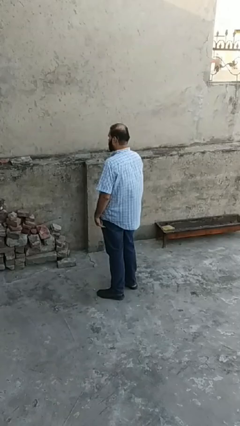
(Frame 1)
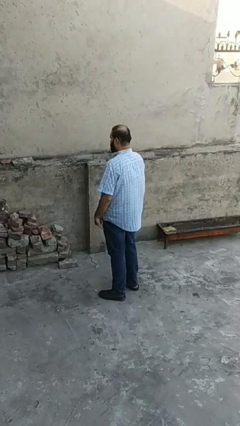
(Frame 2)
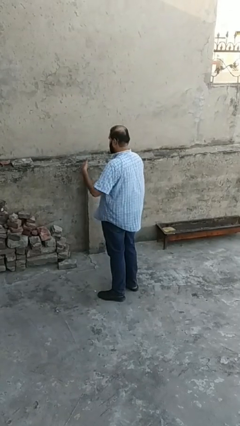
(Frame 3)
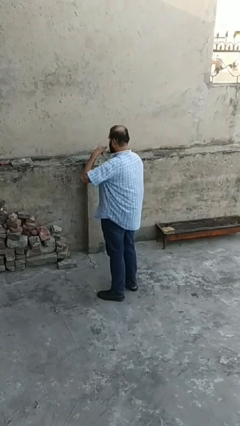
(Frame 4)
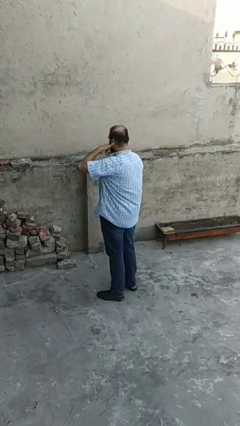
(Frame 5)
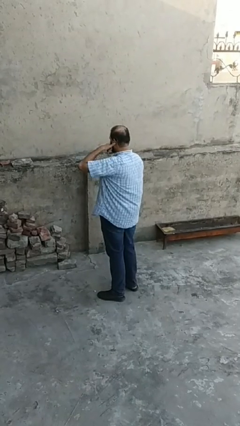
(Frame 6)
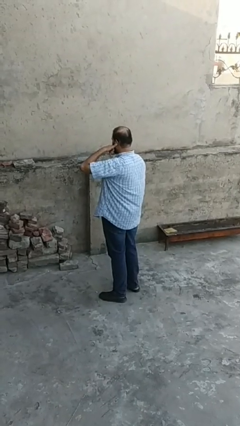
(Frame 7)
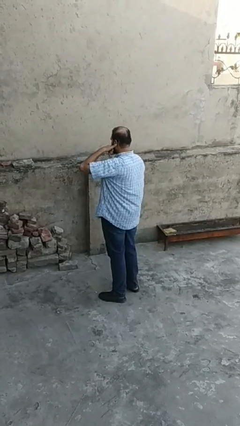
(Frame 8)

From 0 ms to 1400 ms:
person gestures call me

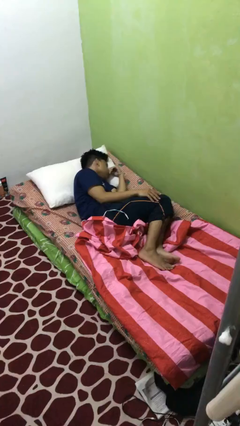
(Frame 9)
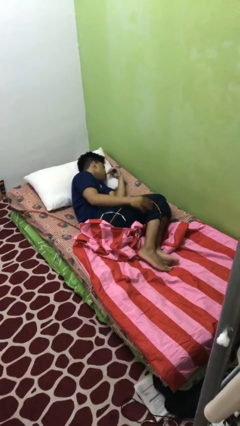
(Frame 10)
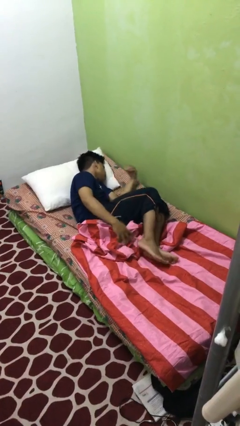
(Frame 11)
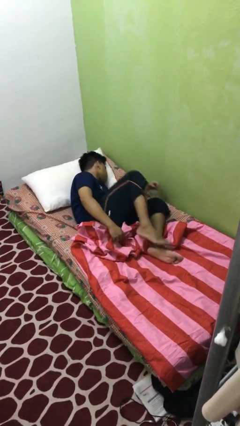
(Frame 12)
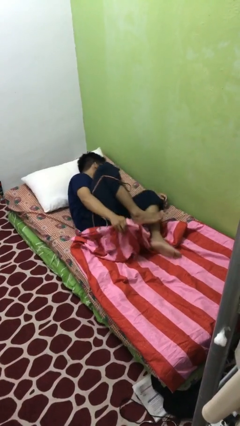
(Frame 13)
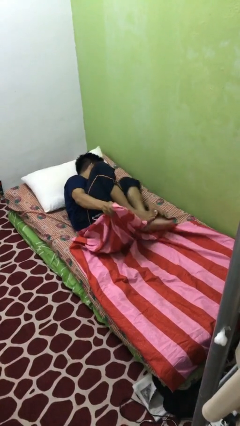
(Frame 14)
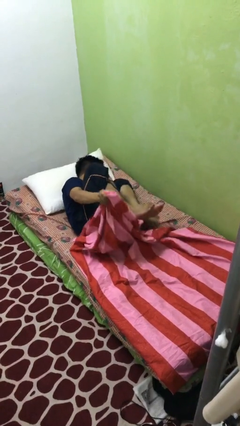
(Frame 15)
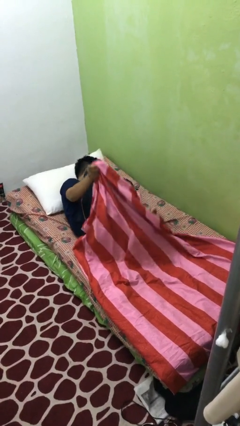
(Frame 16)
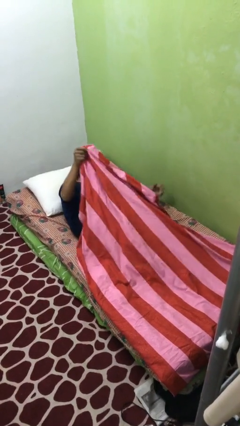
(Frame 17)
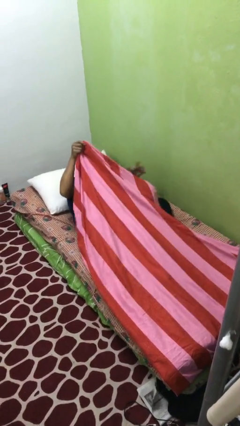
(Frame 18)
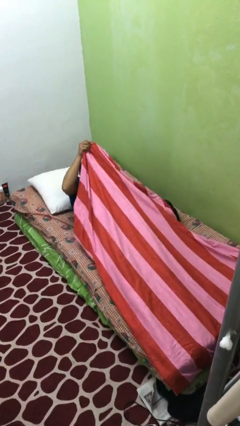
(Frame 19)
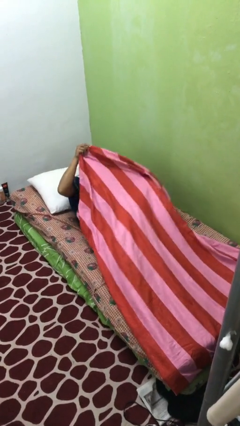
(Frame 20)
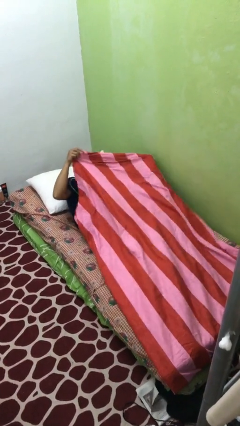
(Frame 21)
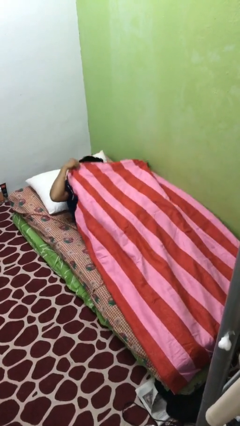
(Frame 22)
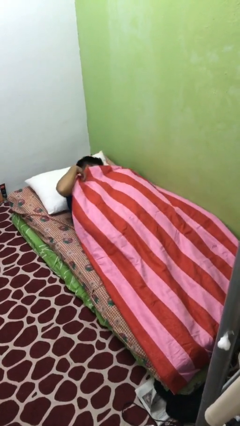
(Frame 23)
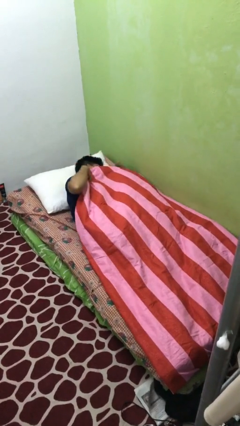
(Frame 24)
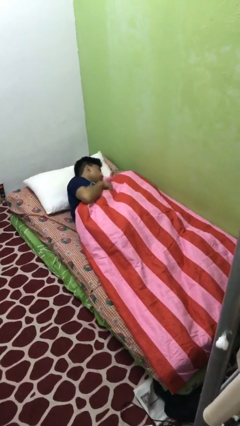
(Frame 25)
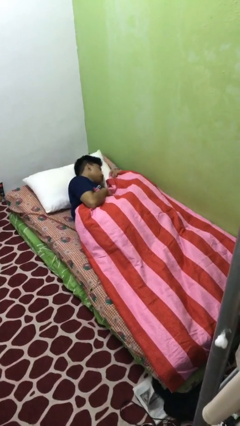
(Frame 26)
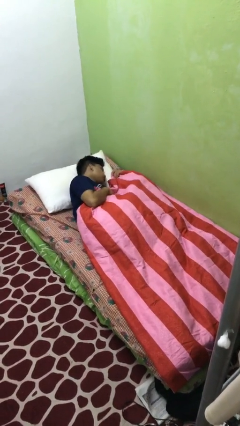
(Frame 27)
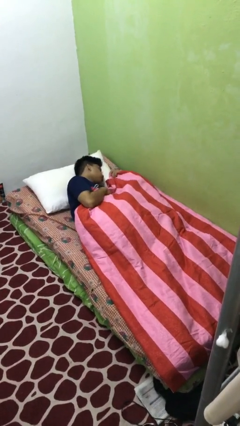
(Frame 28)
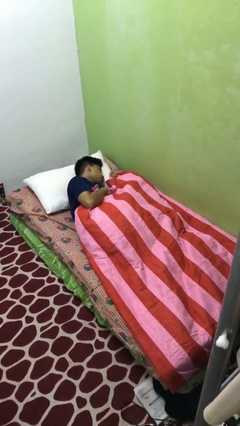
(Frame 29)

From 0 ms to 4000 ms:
person covers with bedsheets

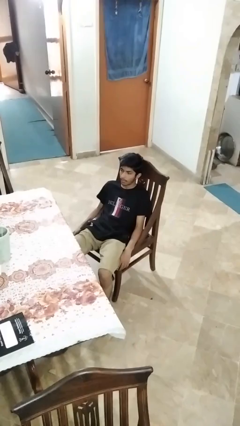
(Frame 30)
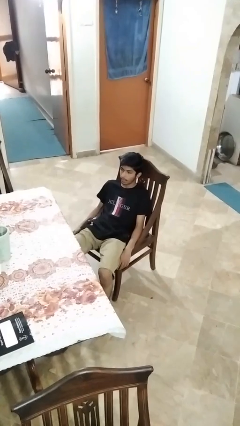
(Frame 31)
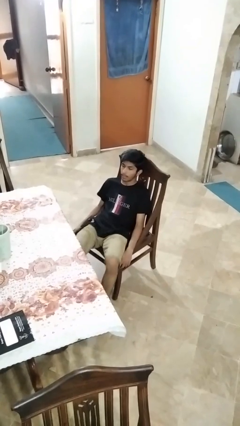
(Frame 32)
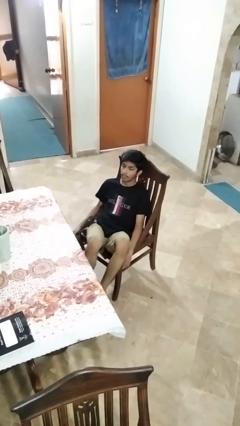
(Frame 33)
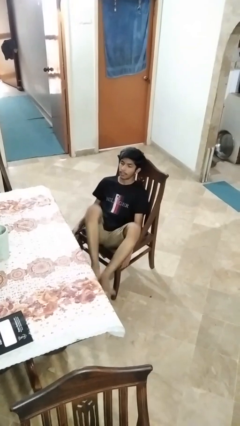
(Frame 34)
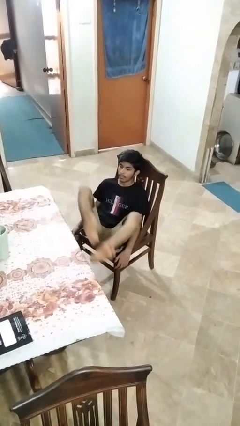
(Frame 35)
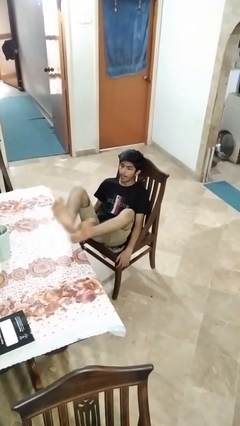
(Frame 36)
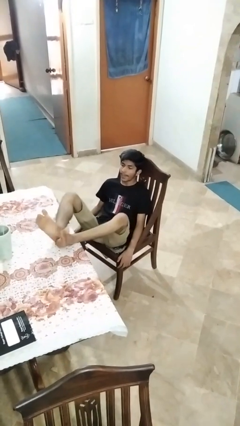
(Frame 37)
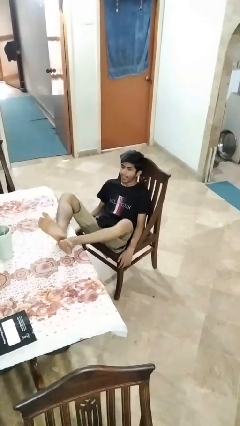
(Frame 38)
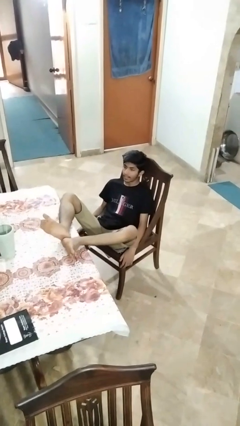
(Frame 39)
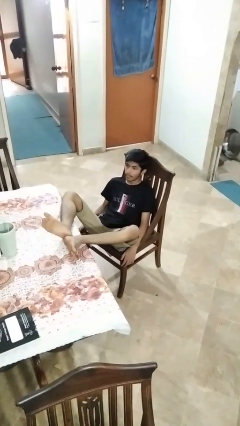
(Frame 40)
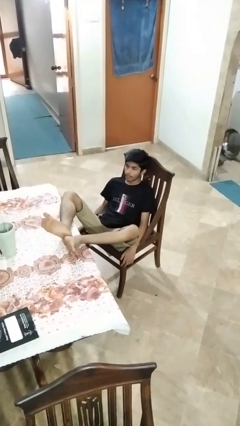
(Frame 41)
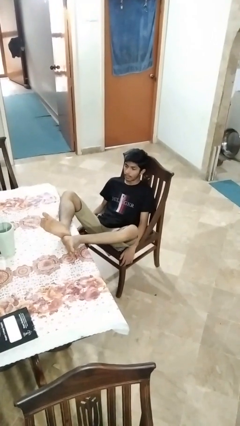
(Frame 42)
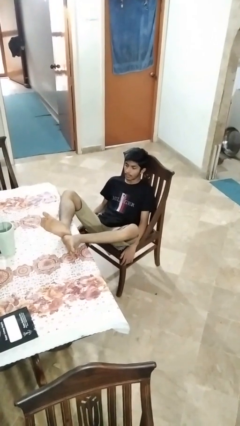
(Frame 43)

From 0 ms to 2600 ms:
person puts feet up

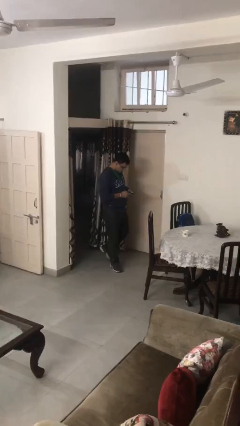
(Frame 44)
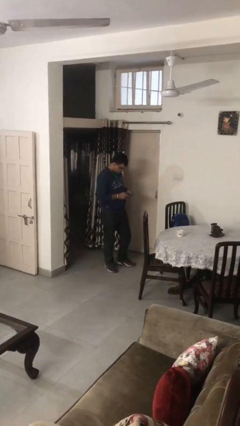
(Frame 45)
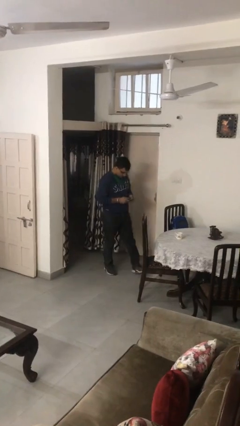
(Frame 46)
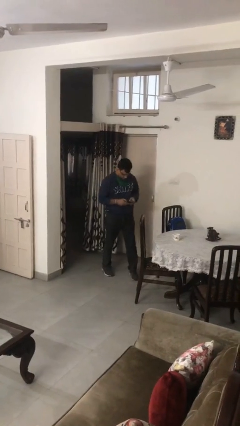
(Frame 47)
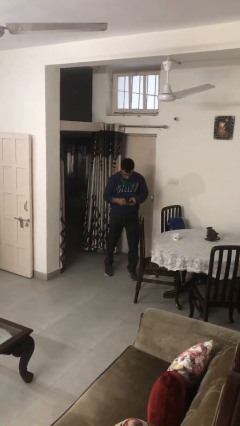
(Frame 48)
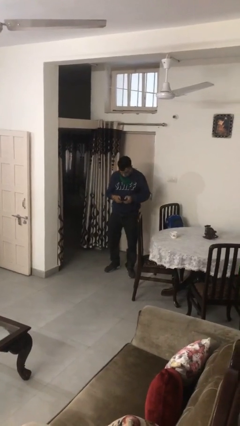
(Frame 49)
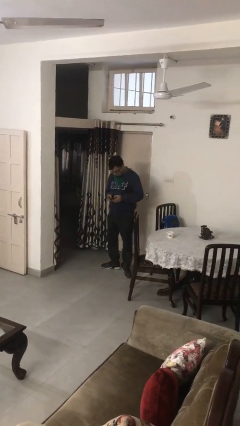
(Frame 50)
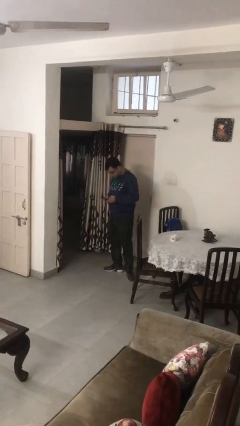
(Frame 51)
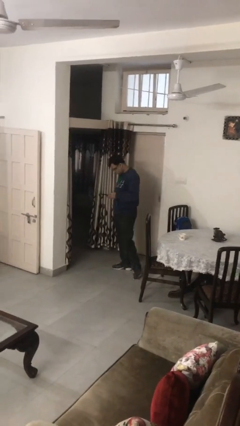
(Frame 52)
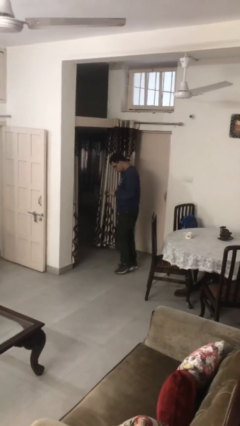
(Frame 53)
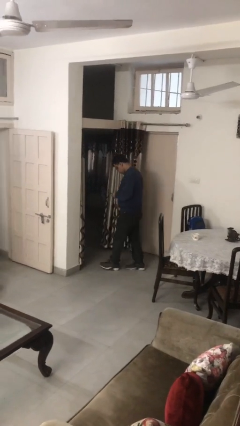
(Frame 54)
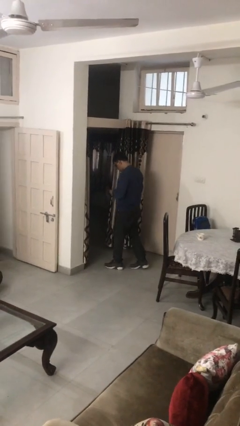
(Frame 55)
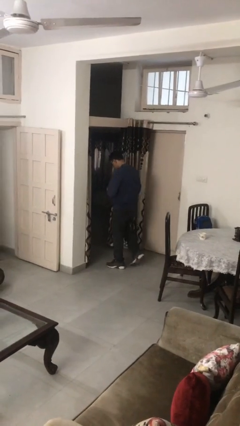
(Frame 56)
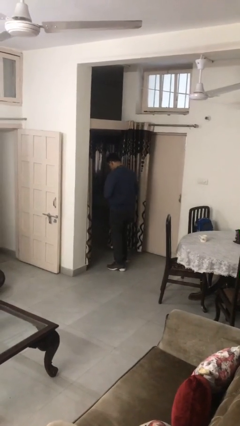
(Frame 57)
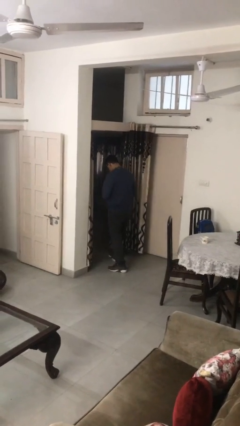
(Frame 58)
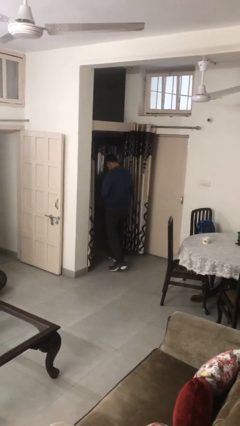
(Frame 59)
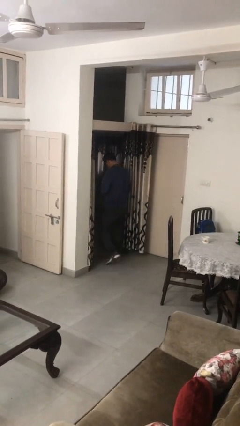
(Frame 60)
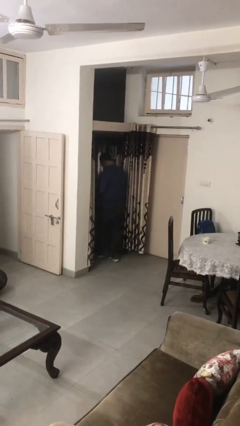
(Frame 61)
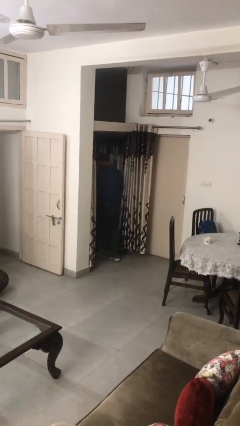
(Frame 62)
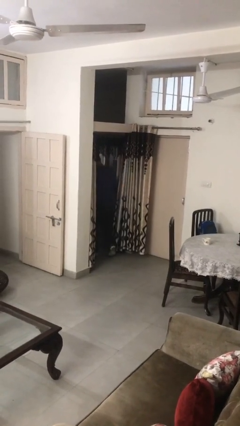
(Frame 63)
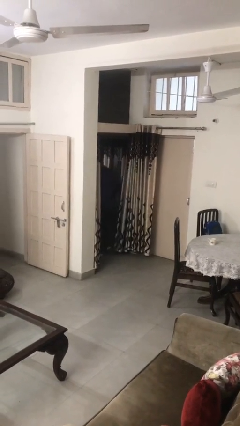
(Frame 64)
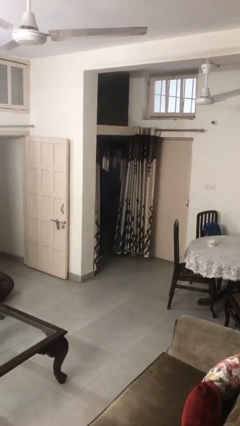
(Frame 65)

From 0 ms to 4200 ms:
person exits scene through structure

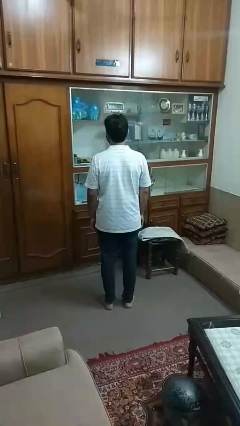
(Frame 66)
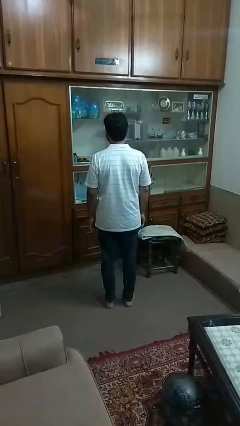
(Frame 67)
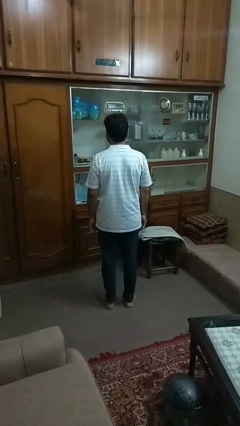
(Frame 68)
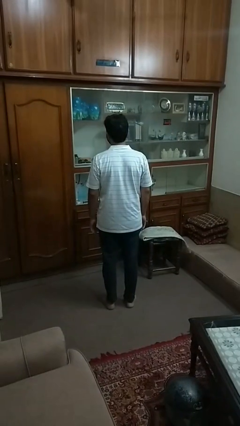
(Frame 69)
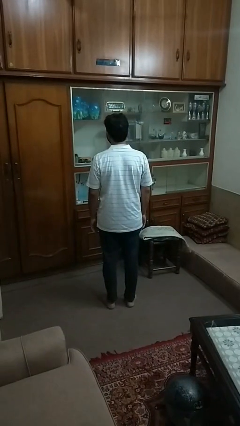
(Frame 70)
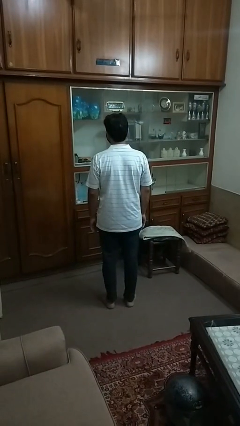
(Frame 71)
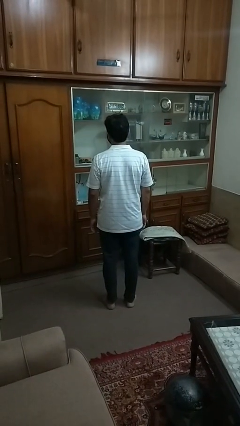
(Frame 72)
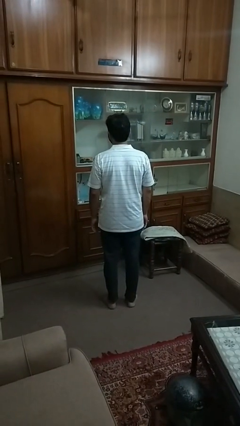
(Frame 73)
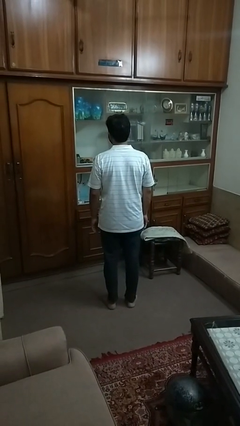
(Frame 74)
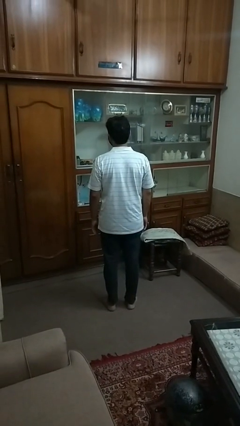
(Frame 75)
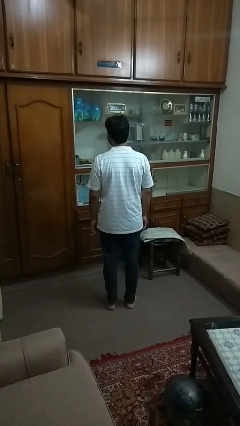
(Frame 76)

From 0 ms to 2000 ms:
person sneezes into arm

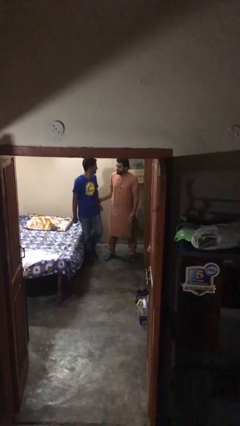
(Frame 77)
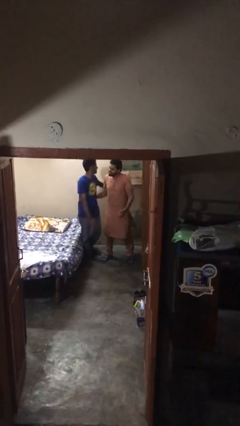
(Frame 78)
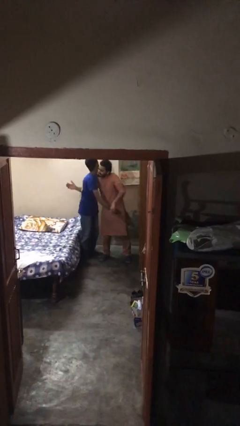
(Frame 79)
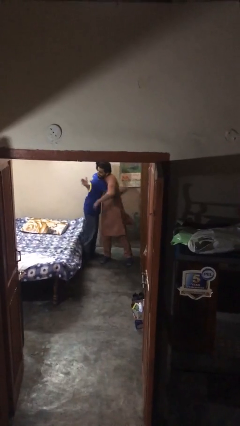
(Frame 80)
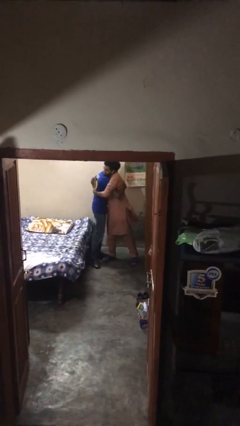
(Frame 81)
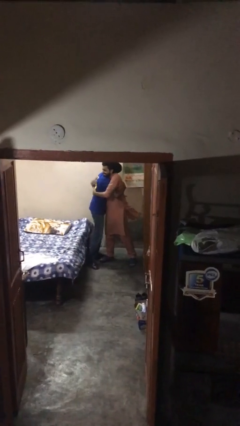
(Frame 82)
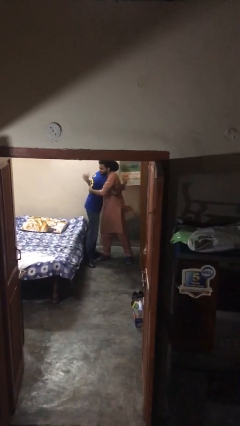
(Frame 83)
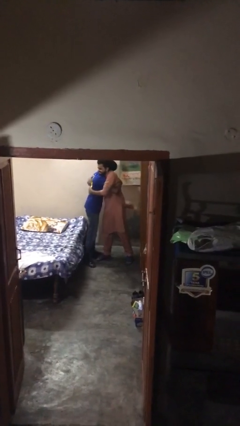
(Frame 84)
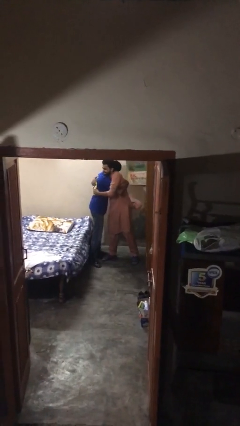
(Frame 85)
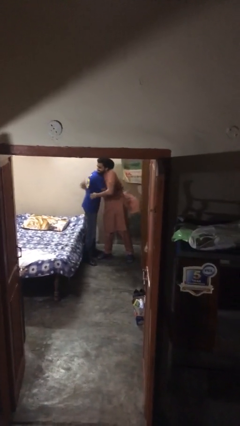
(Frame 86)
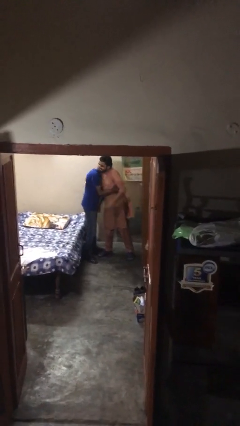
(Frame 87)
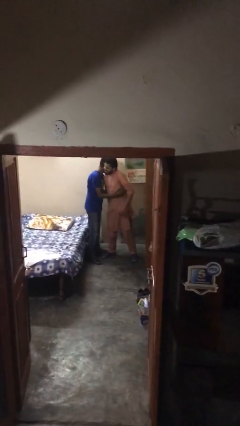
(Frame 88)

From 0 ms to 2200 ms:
person embraces person

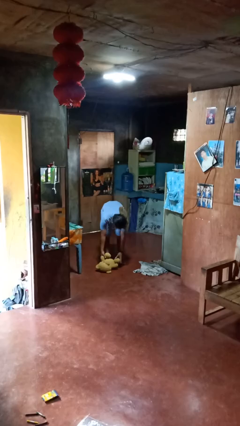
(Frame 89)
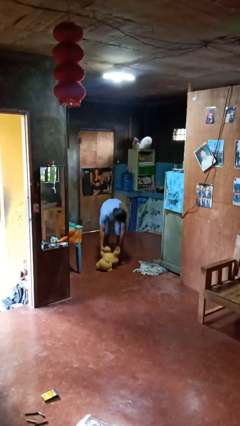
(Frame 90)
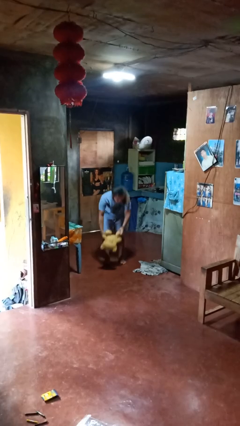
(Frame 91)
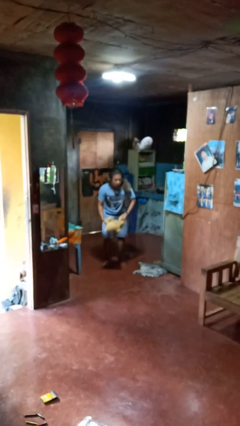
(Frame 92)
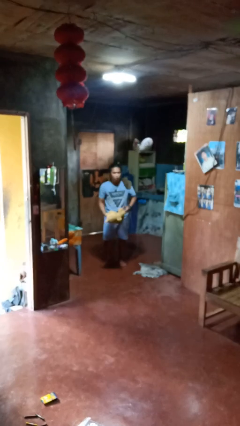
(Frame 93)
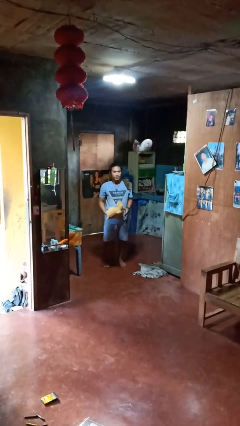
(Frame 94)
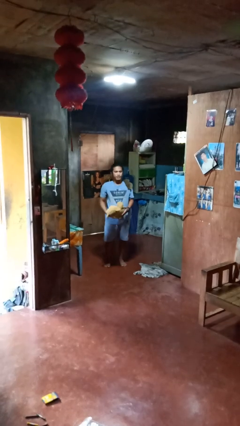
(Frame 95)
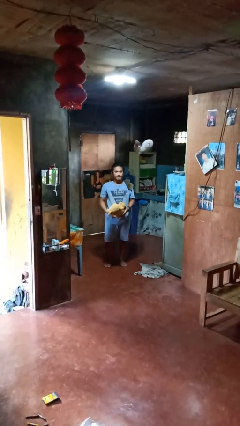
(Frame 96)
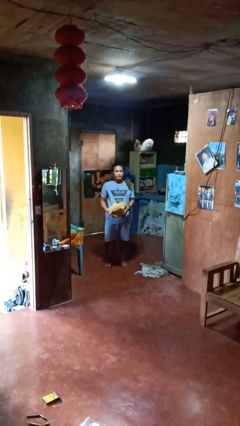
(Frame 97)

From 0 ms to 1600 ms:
person picks up object from floor
